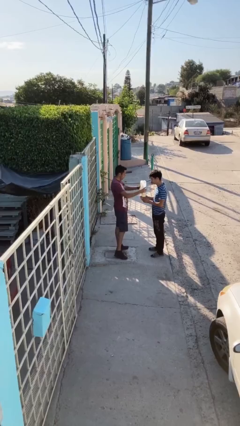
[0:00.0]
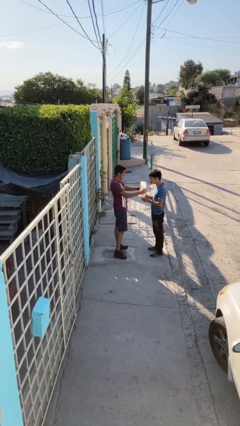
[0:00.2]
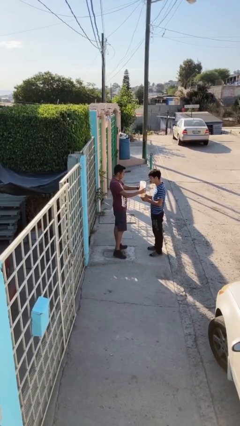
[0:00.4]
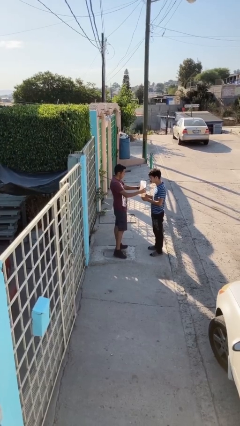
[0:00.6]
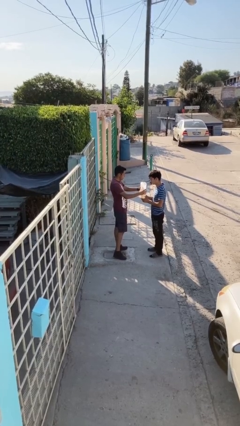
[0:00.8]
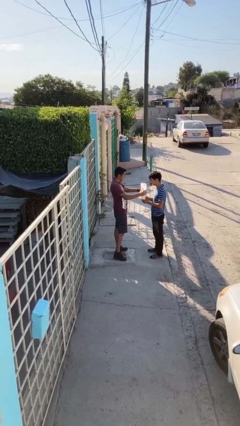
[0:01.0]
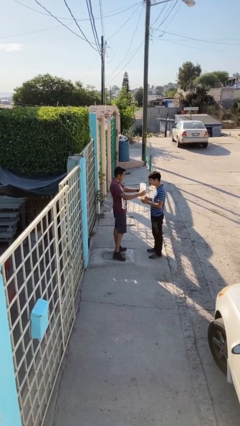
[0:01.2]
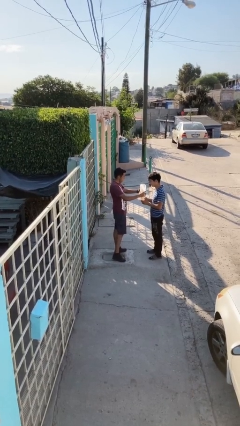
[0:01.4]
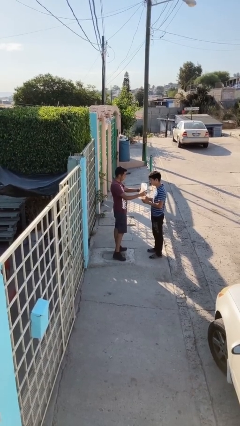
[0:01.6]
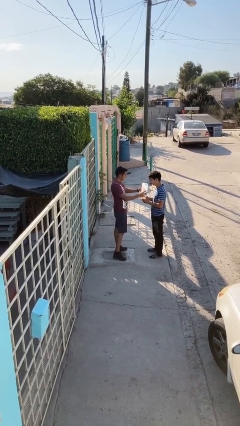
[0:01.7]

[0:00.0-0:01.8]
person transfers object to person

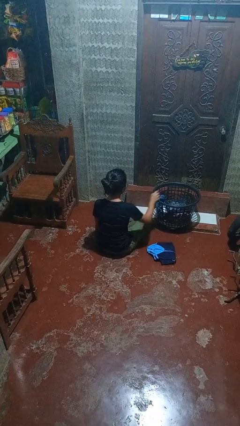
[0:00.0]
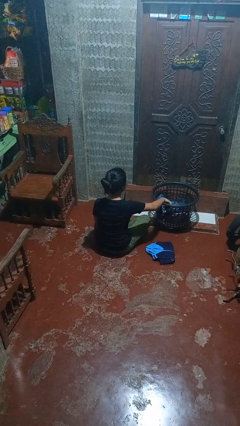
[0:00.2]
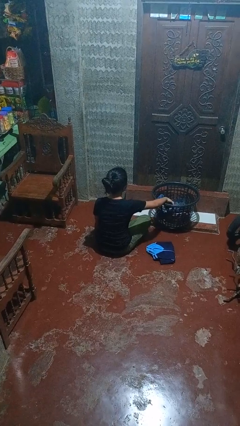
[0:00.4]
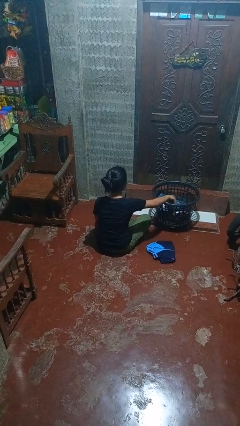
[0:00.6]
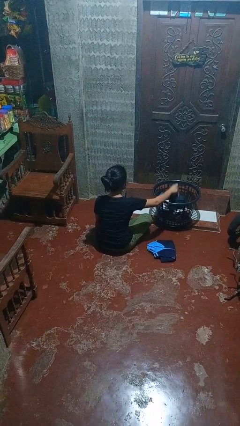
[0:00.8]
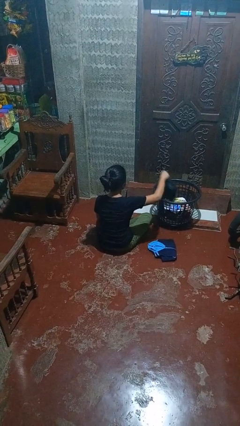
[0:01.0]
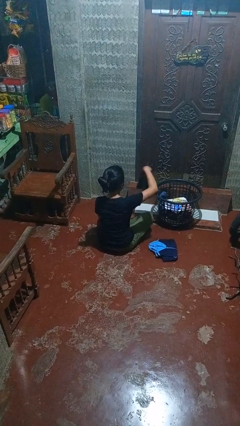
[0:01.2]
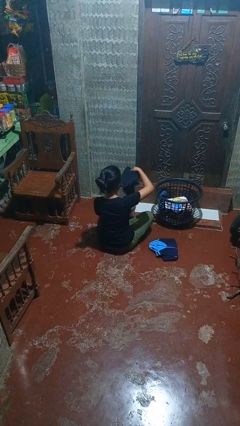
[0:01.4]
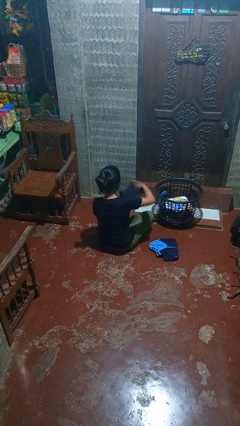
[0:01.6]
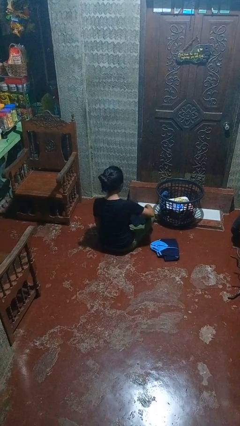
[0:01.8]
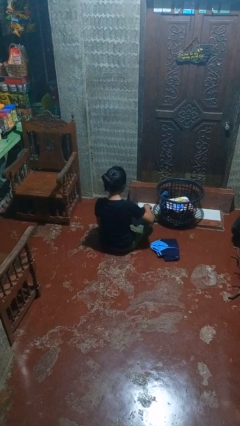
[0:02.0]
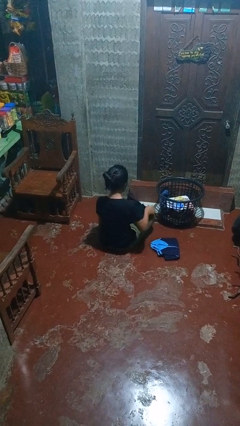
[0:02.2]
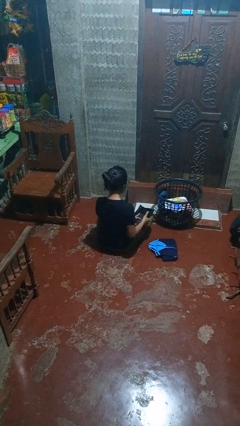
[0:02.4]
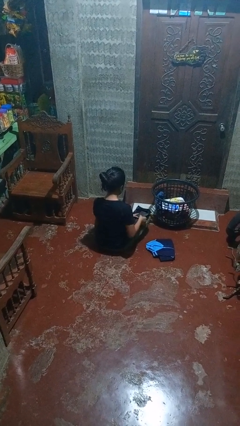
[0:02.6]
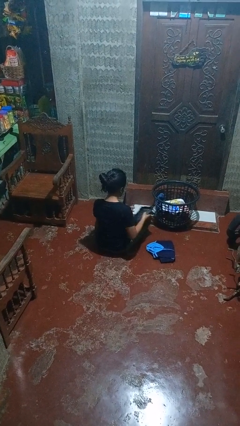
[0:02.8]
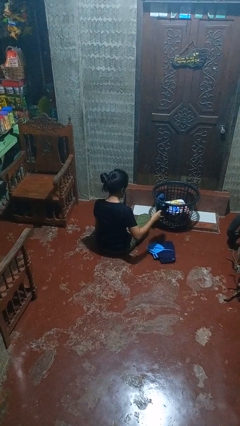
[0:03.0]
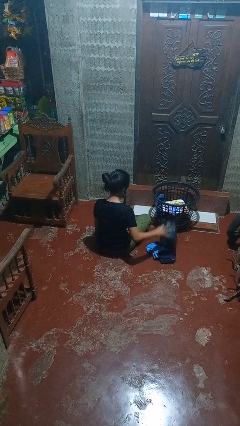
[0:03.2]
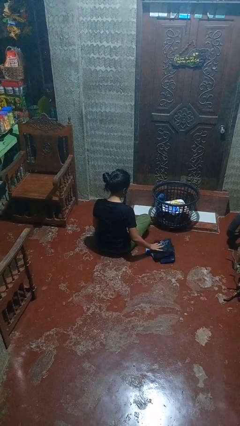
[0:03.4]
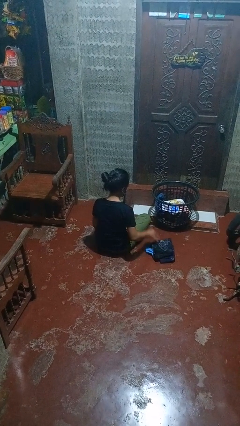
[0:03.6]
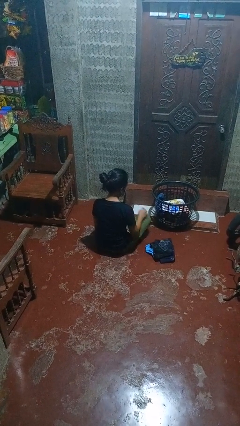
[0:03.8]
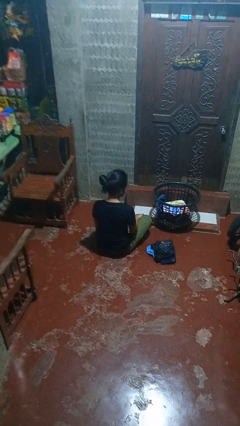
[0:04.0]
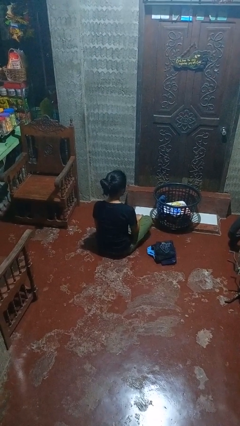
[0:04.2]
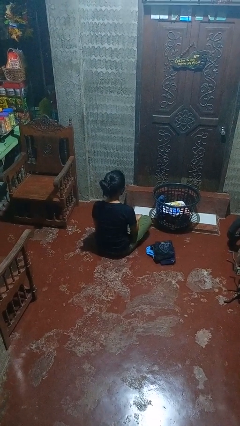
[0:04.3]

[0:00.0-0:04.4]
person folds shirt

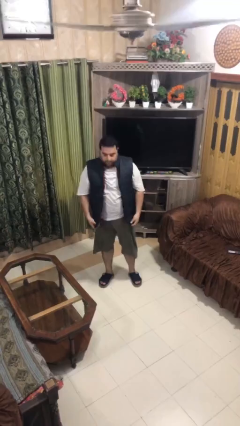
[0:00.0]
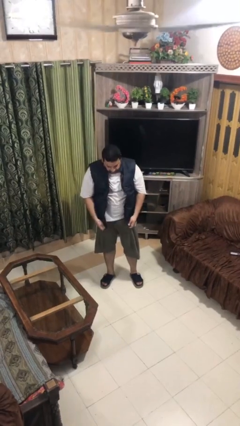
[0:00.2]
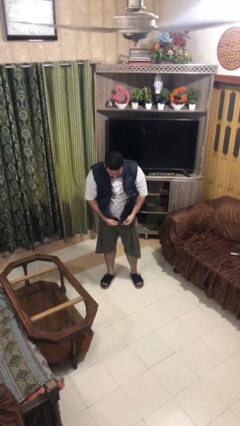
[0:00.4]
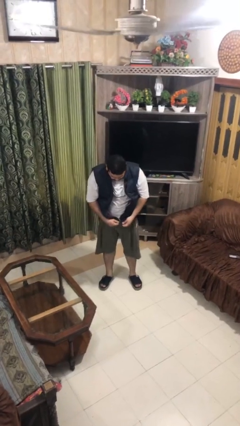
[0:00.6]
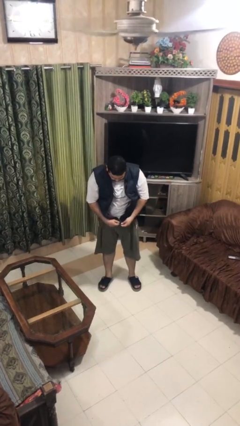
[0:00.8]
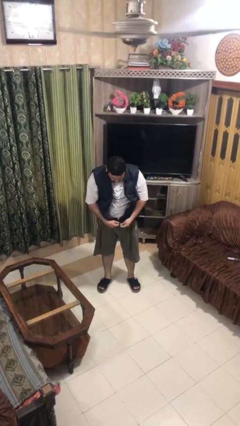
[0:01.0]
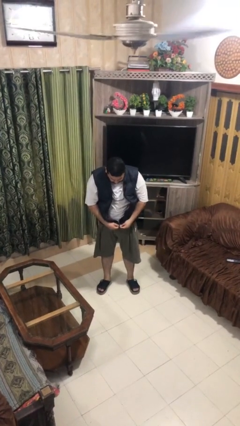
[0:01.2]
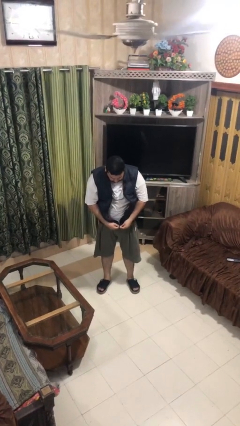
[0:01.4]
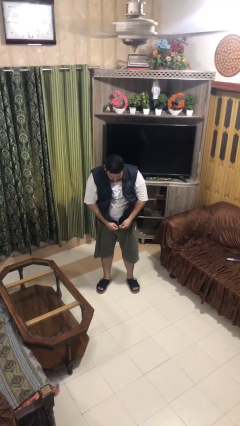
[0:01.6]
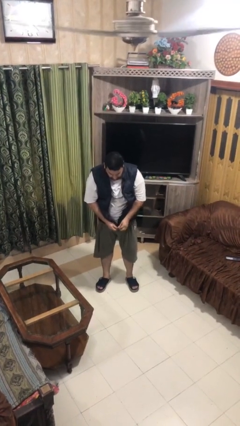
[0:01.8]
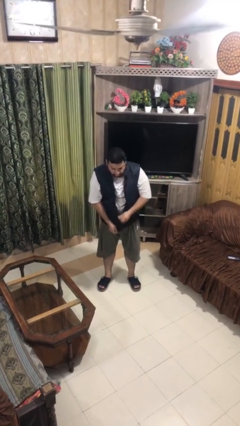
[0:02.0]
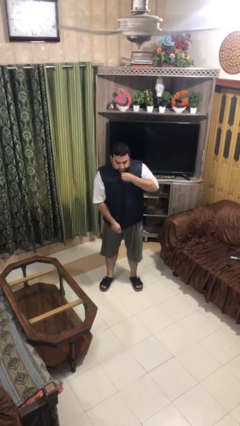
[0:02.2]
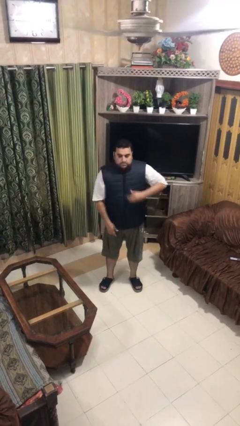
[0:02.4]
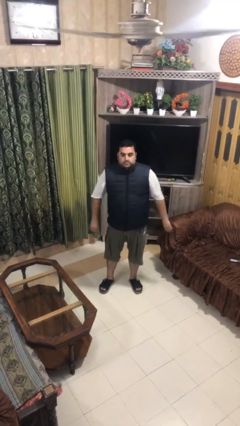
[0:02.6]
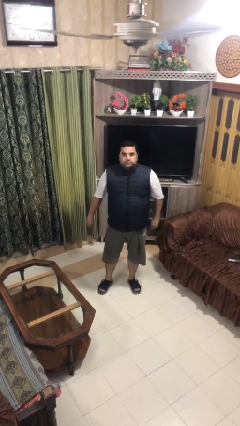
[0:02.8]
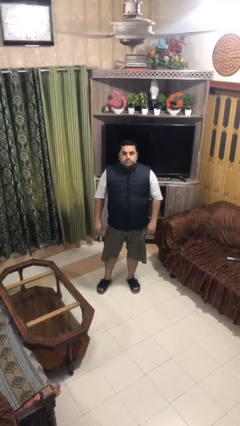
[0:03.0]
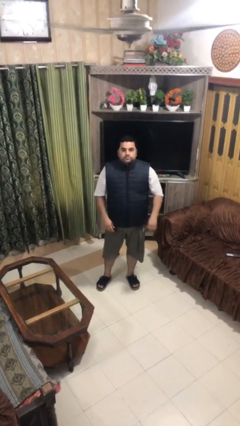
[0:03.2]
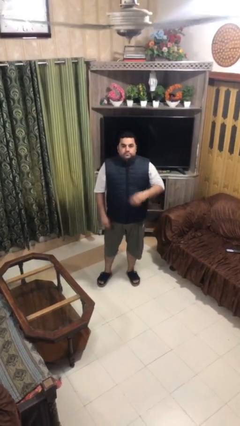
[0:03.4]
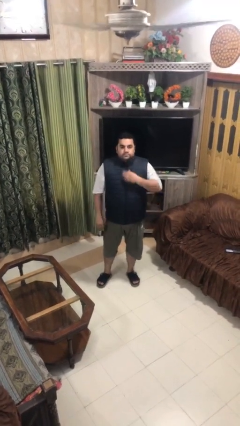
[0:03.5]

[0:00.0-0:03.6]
person zips up jacket

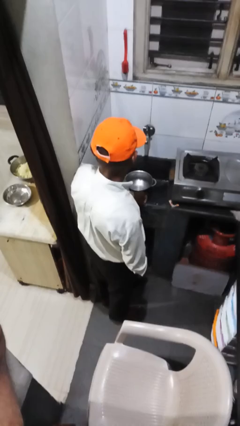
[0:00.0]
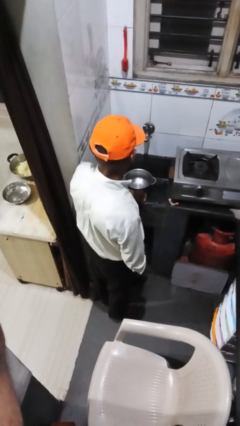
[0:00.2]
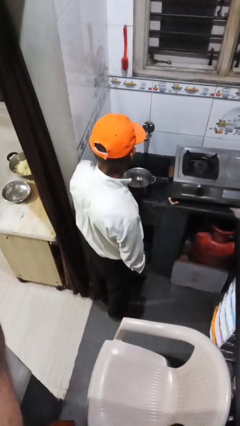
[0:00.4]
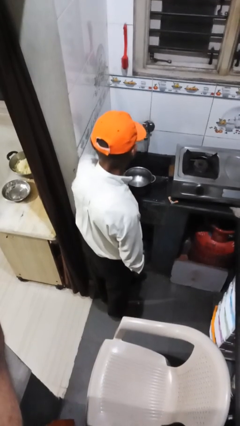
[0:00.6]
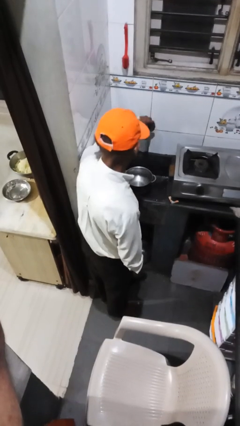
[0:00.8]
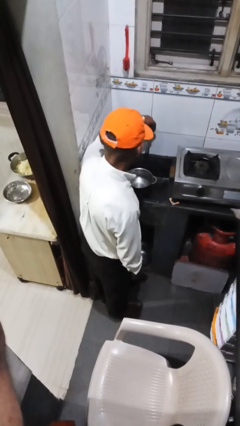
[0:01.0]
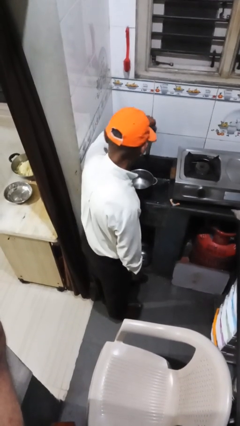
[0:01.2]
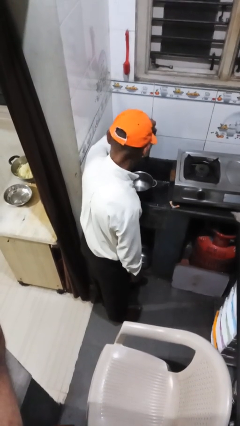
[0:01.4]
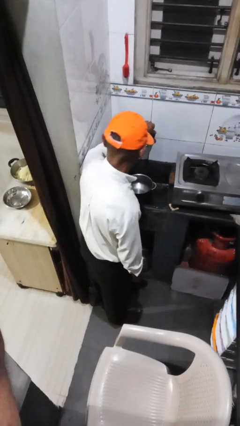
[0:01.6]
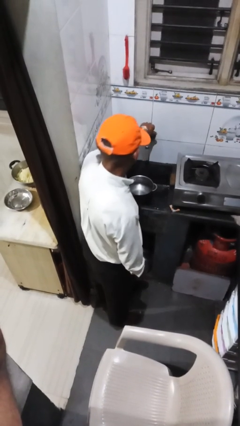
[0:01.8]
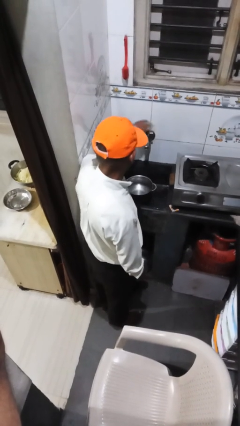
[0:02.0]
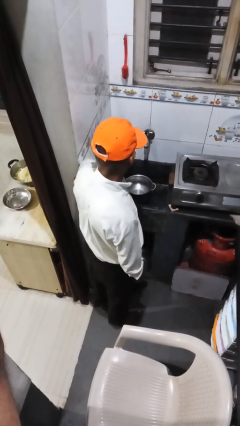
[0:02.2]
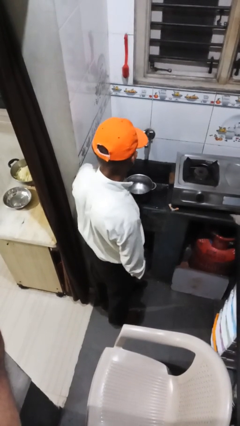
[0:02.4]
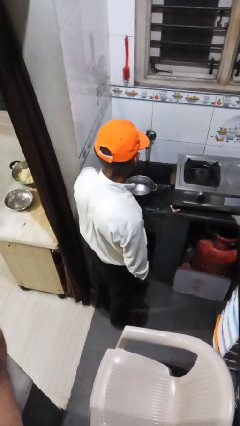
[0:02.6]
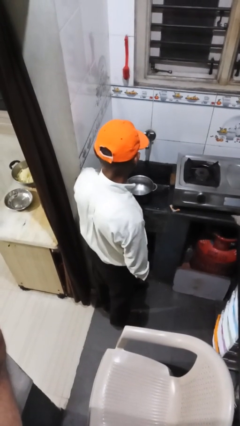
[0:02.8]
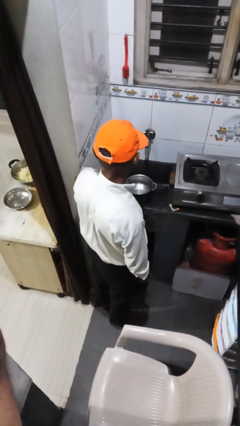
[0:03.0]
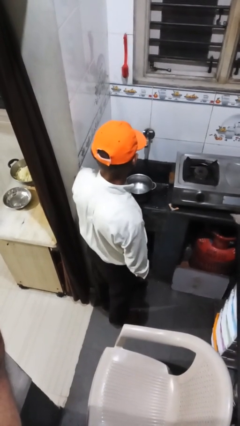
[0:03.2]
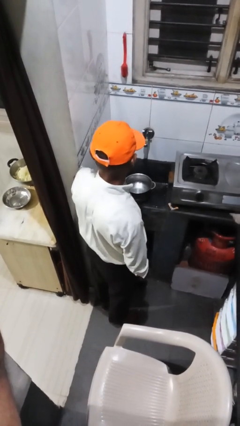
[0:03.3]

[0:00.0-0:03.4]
person turns on faucet

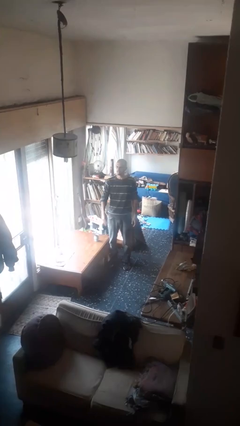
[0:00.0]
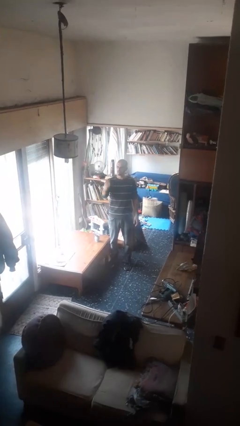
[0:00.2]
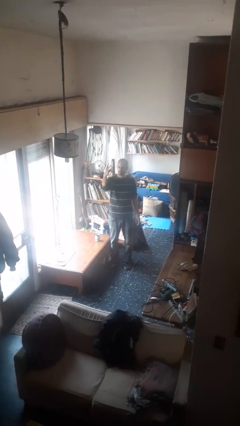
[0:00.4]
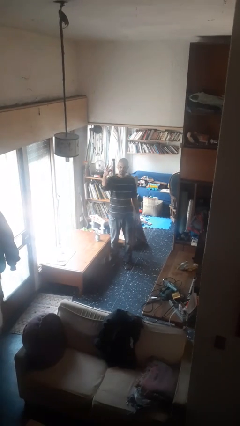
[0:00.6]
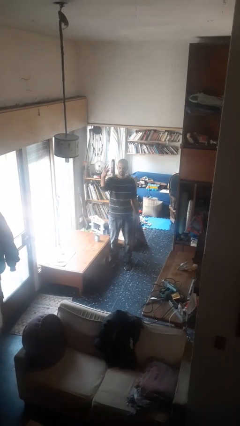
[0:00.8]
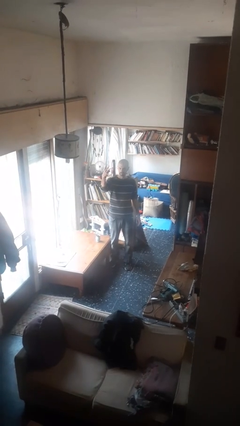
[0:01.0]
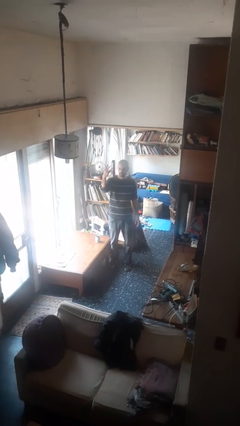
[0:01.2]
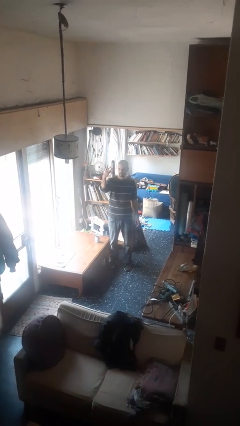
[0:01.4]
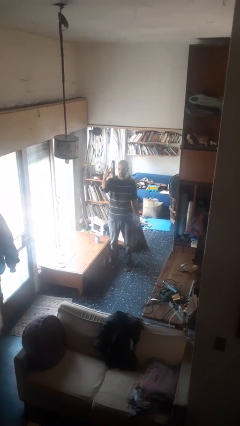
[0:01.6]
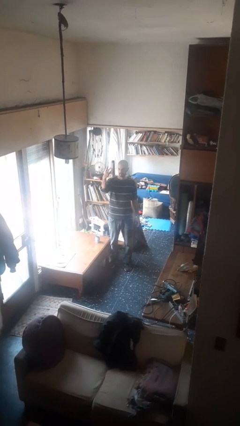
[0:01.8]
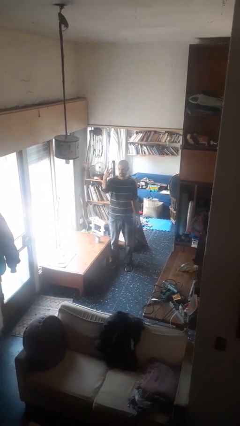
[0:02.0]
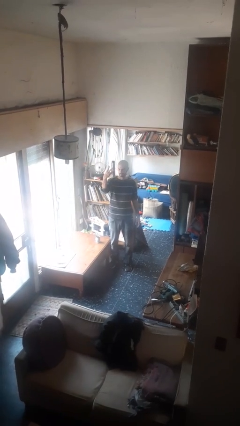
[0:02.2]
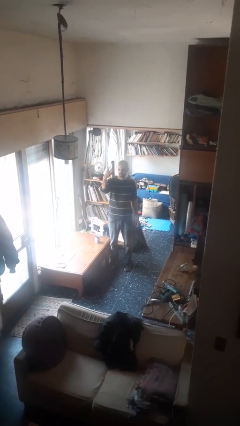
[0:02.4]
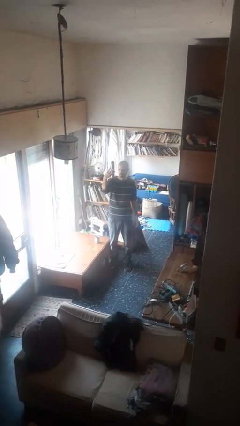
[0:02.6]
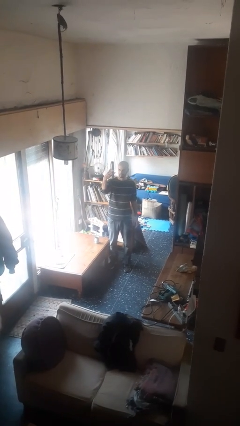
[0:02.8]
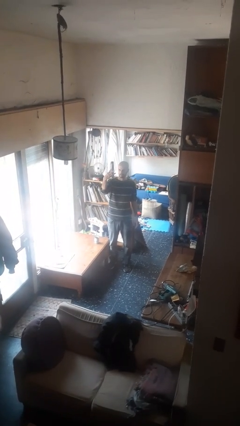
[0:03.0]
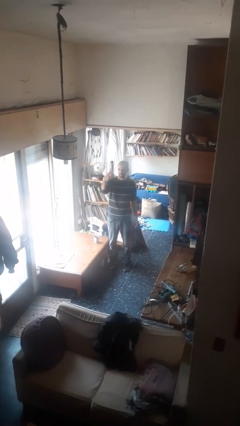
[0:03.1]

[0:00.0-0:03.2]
person gestures number three

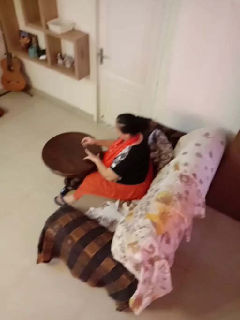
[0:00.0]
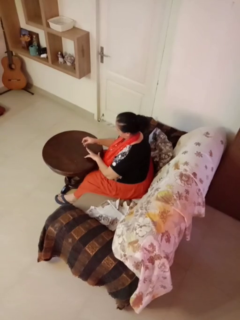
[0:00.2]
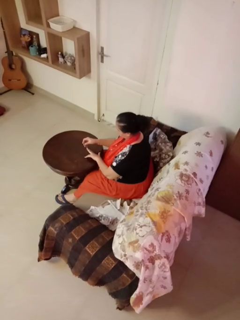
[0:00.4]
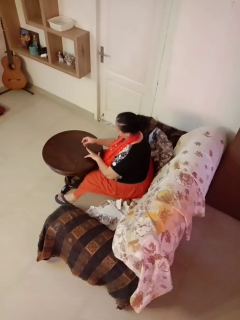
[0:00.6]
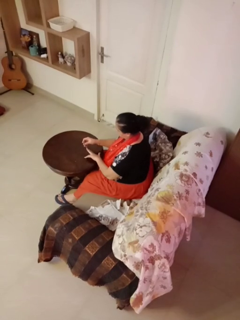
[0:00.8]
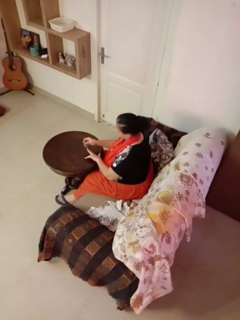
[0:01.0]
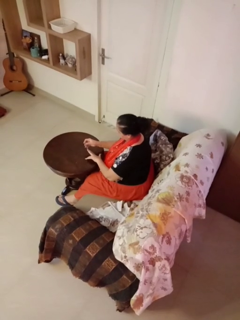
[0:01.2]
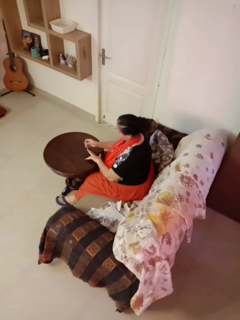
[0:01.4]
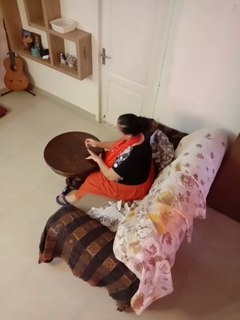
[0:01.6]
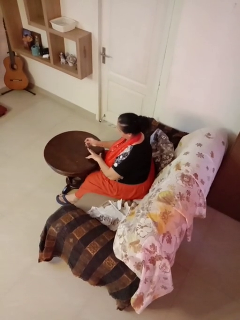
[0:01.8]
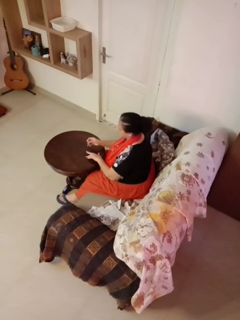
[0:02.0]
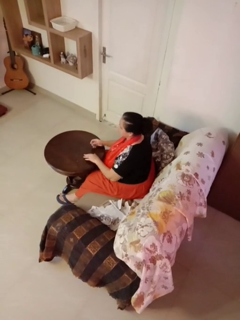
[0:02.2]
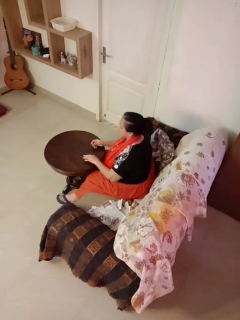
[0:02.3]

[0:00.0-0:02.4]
person clips fingernails
